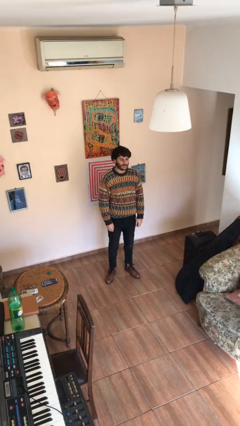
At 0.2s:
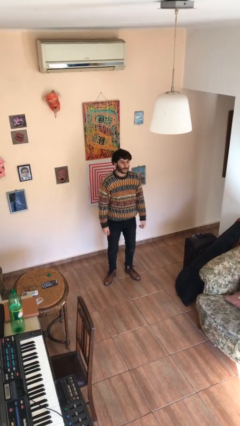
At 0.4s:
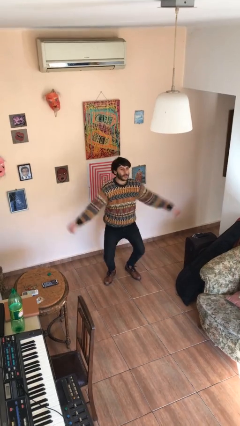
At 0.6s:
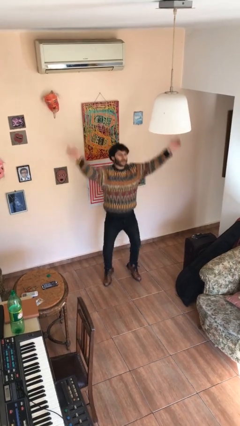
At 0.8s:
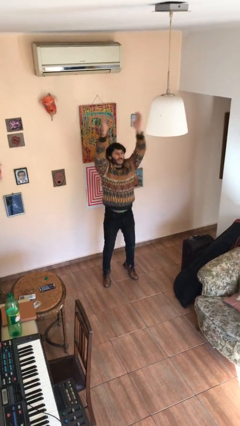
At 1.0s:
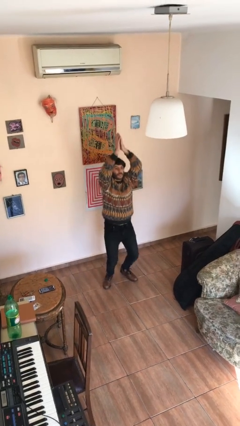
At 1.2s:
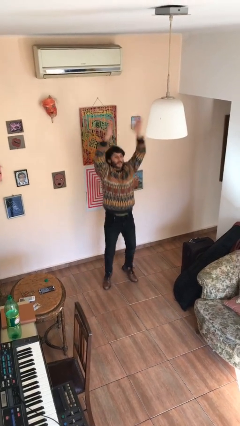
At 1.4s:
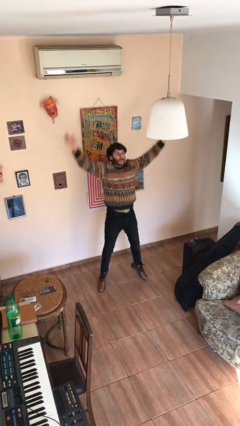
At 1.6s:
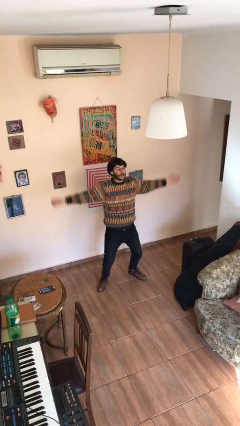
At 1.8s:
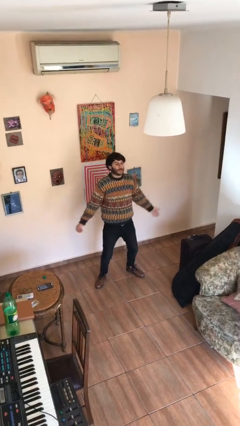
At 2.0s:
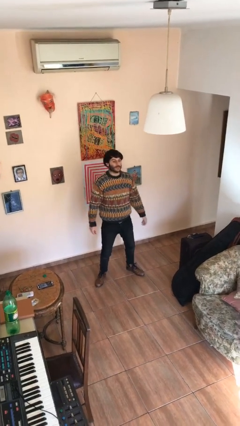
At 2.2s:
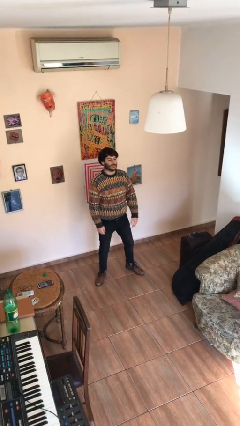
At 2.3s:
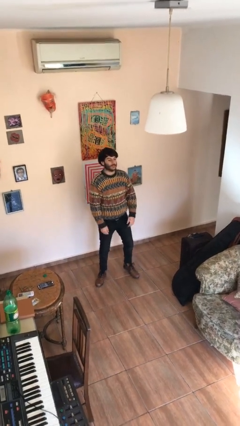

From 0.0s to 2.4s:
person exercises with jumping jacks

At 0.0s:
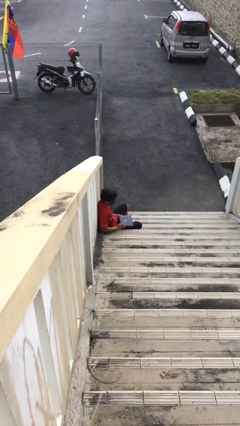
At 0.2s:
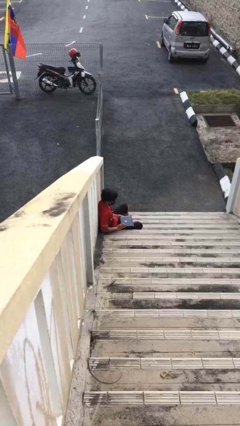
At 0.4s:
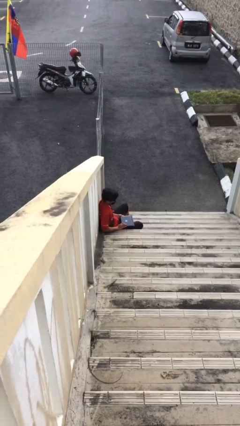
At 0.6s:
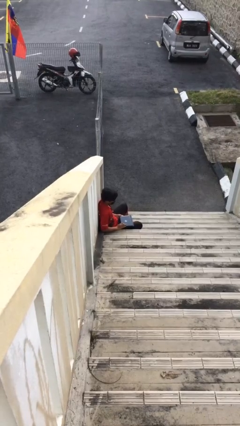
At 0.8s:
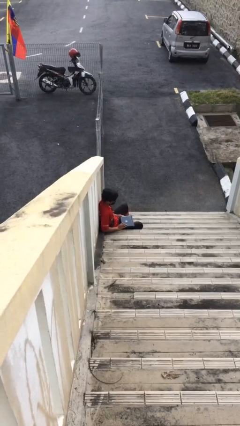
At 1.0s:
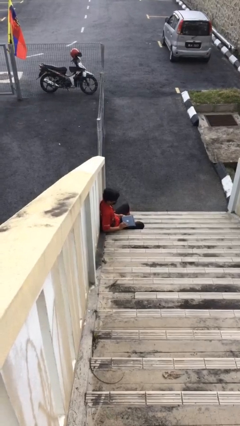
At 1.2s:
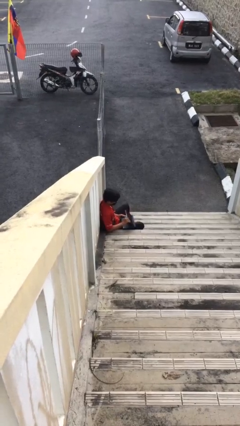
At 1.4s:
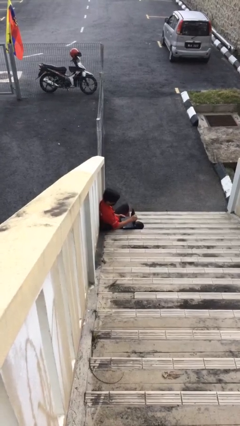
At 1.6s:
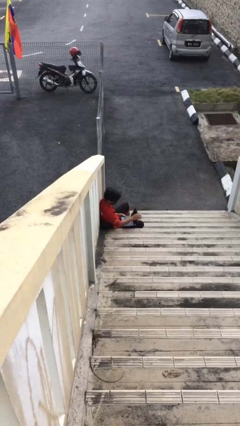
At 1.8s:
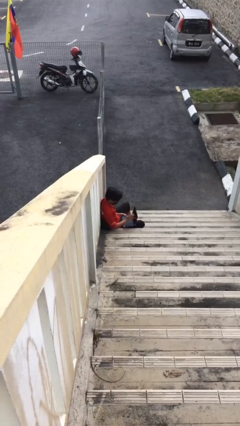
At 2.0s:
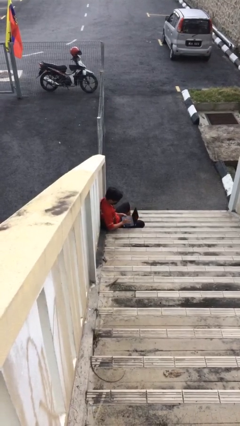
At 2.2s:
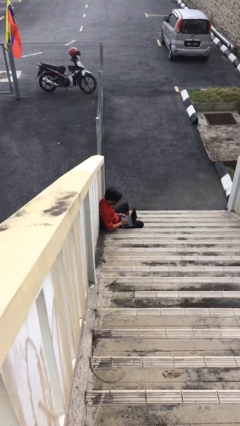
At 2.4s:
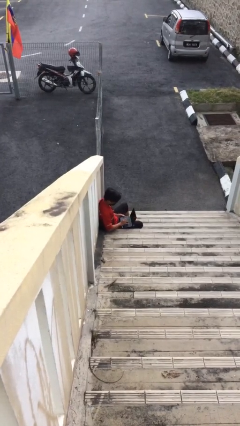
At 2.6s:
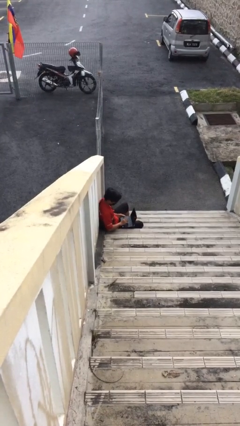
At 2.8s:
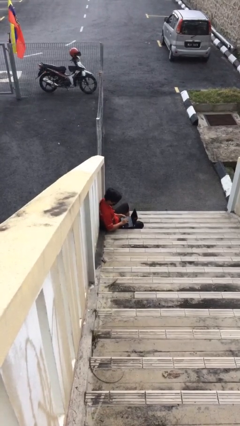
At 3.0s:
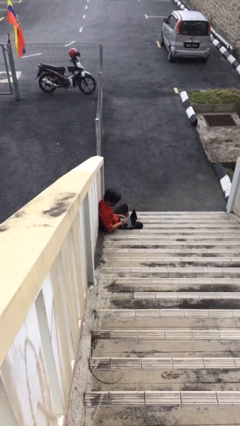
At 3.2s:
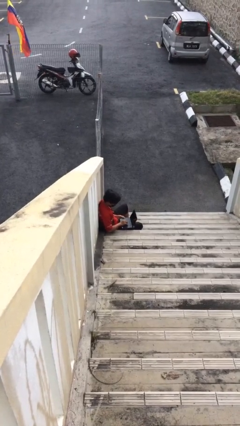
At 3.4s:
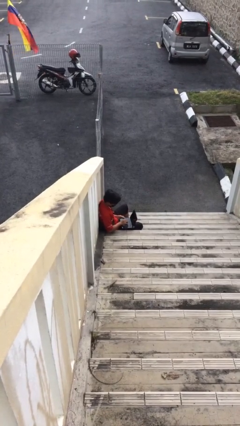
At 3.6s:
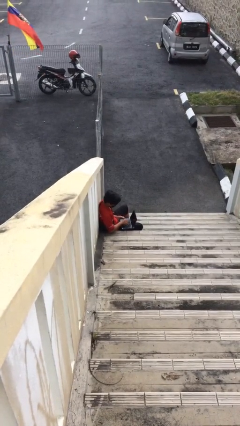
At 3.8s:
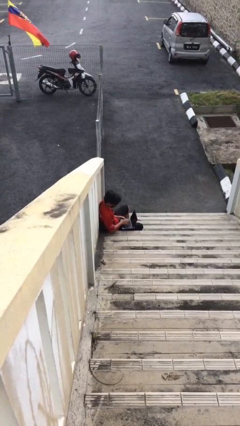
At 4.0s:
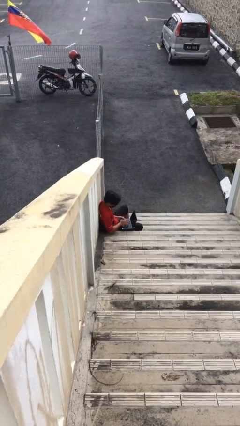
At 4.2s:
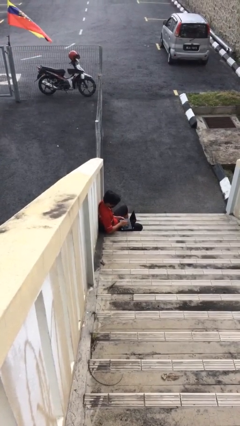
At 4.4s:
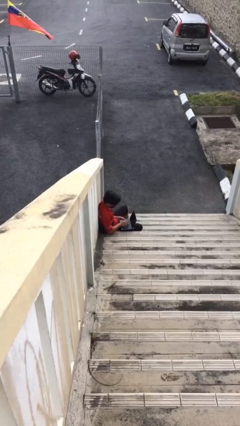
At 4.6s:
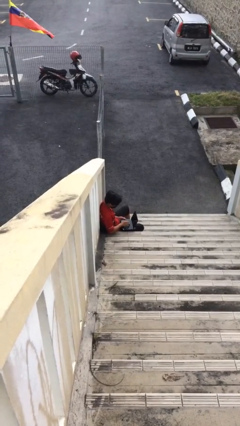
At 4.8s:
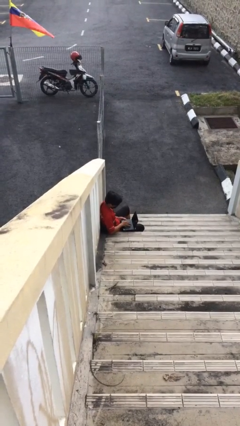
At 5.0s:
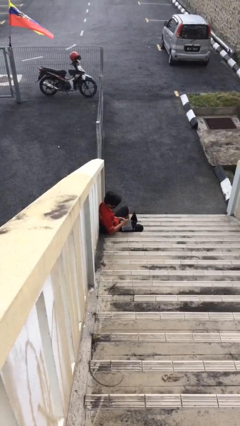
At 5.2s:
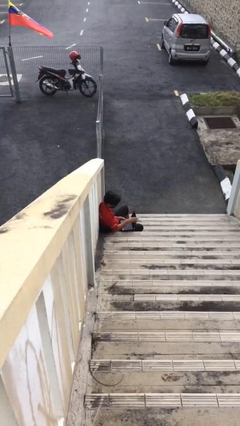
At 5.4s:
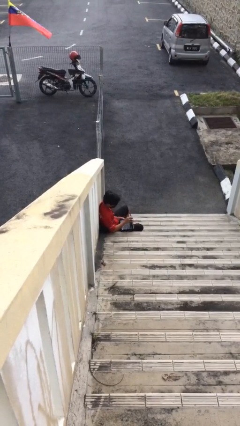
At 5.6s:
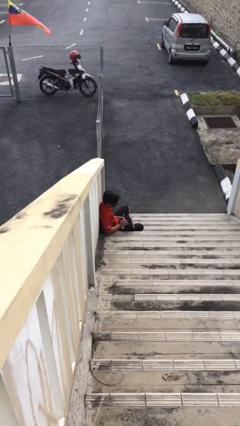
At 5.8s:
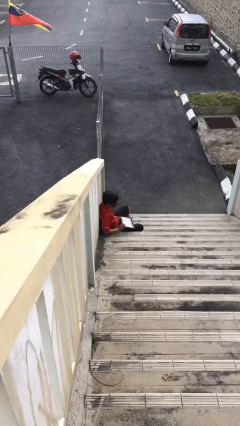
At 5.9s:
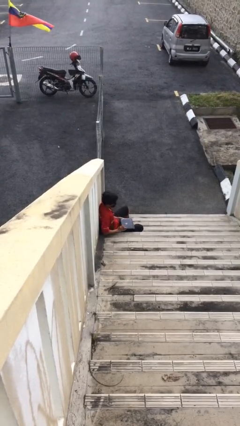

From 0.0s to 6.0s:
person interacts with laptop

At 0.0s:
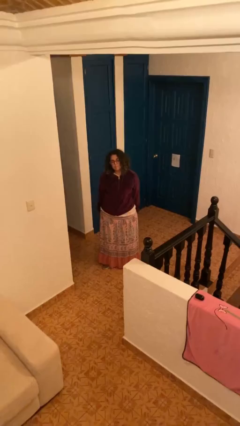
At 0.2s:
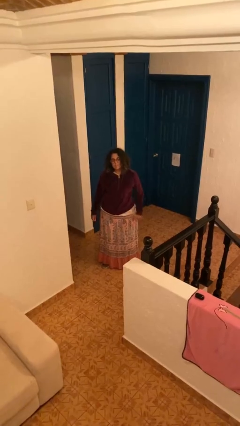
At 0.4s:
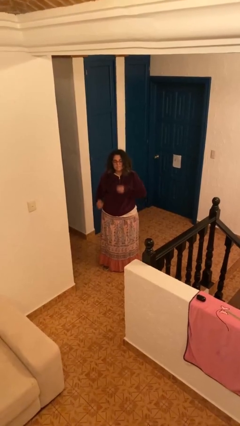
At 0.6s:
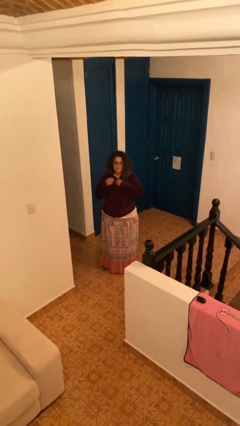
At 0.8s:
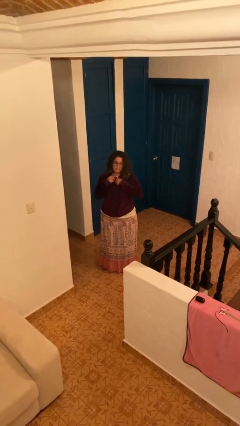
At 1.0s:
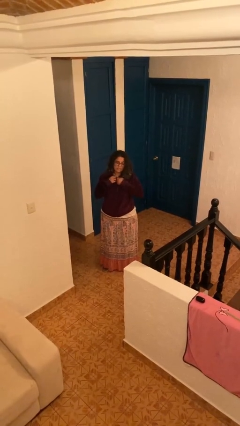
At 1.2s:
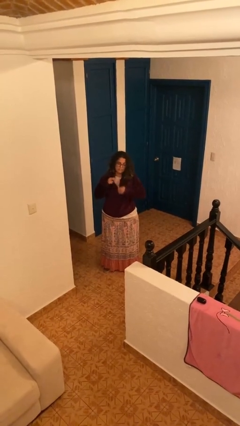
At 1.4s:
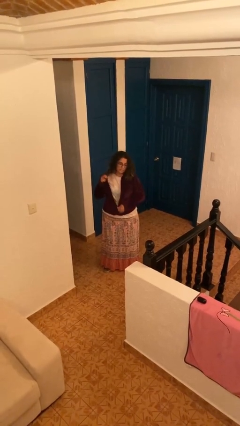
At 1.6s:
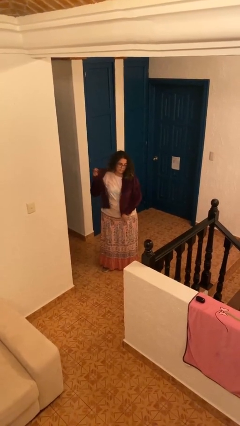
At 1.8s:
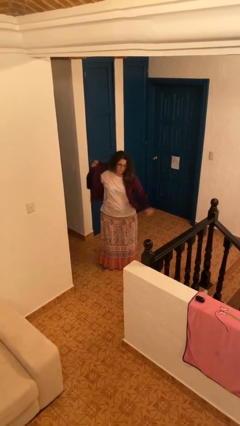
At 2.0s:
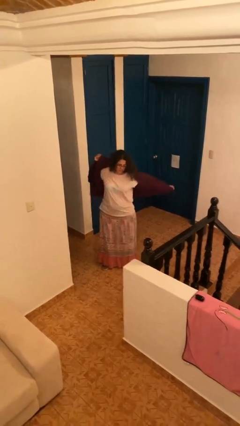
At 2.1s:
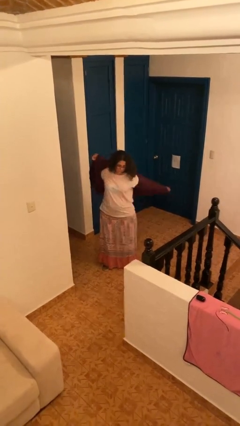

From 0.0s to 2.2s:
person unzips jacket

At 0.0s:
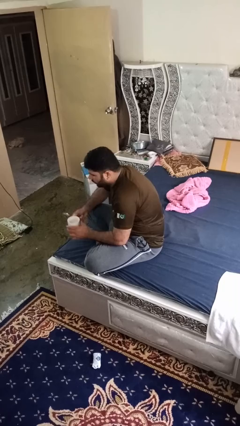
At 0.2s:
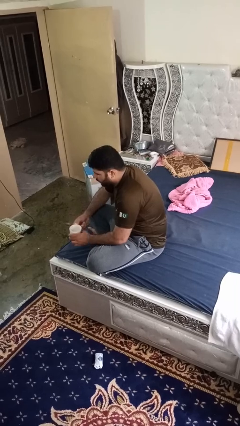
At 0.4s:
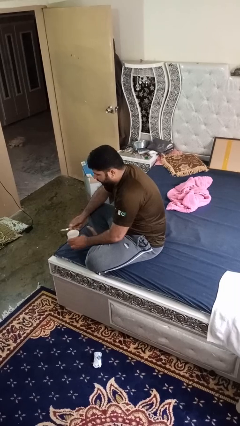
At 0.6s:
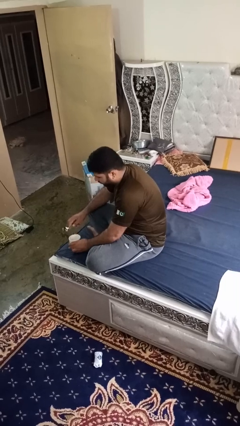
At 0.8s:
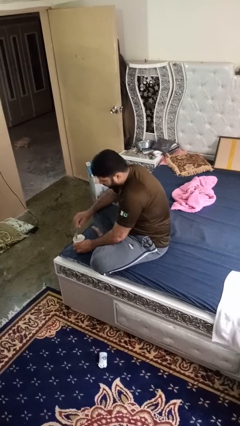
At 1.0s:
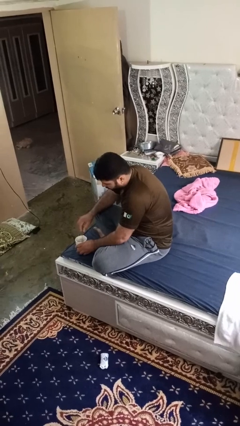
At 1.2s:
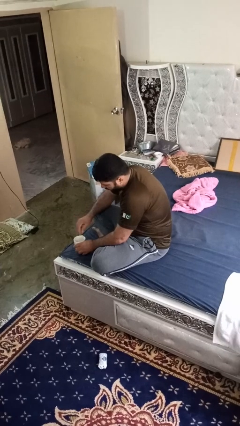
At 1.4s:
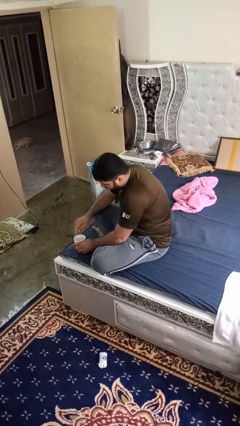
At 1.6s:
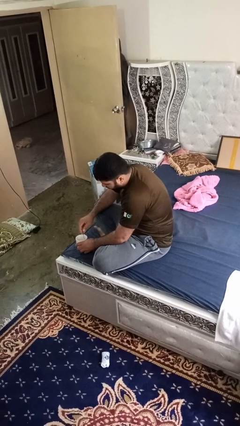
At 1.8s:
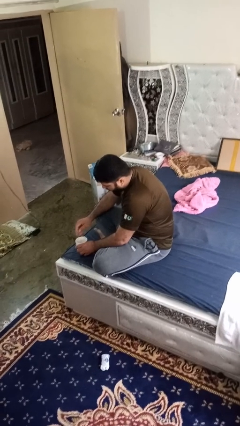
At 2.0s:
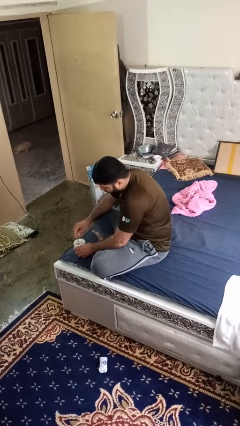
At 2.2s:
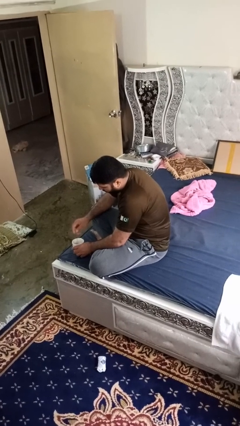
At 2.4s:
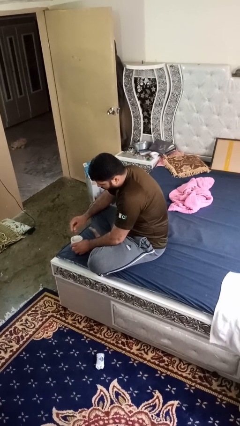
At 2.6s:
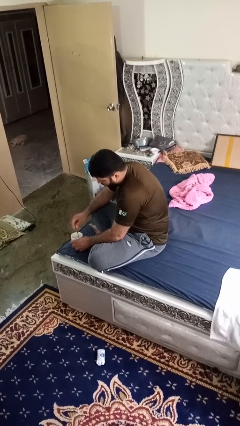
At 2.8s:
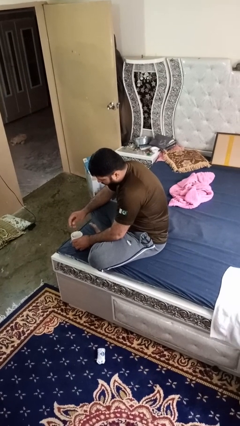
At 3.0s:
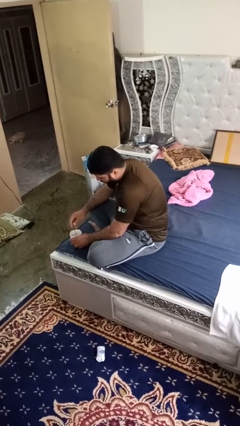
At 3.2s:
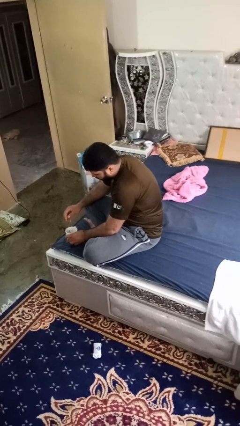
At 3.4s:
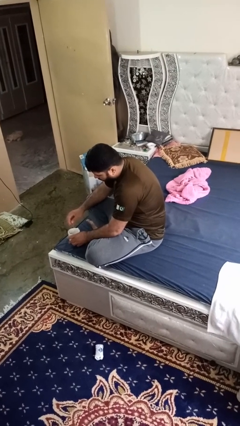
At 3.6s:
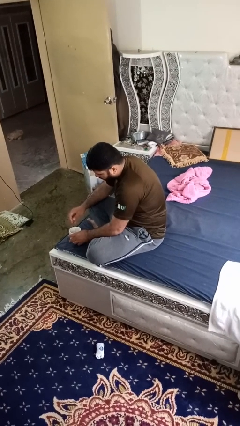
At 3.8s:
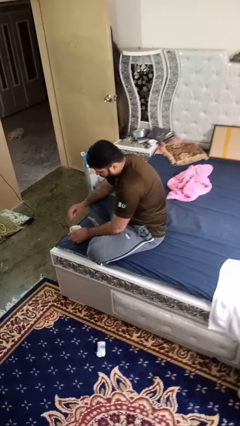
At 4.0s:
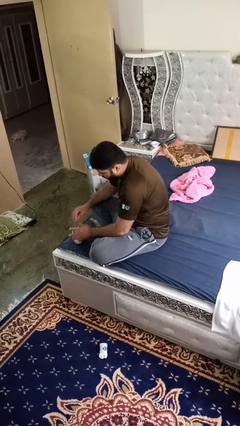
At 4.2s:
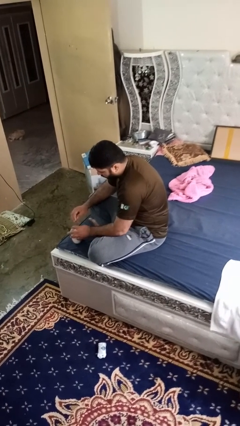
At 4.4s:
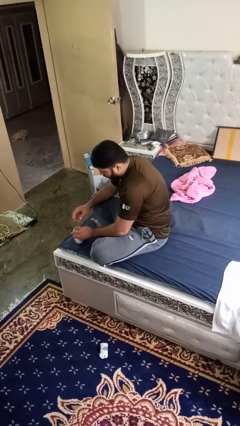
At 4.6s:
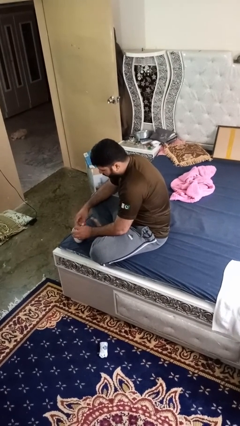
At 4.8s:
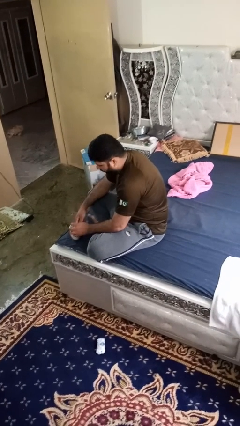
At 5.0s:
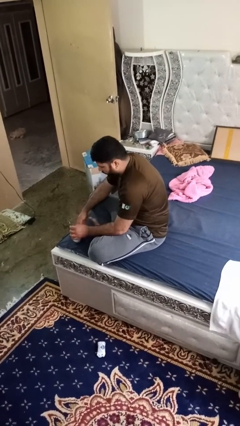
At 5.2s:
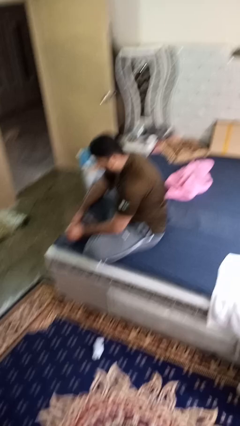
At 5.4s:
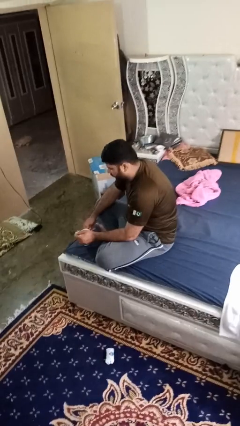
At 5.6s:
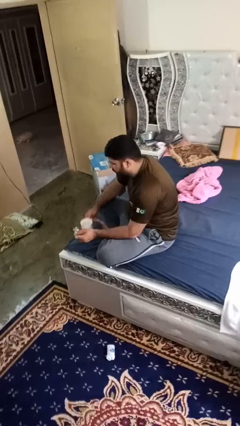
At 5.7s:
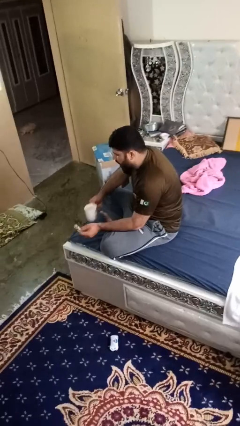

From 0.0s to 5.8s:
person stirs mug

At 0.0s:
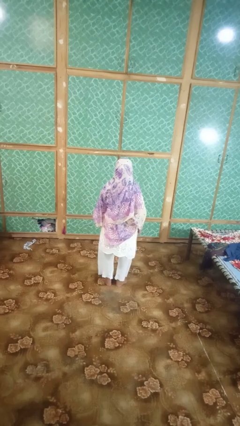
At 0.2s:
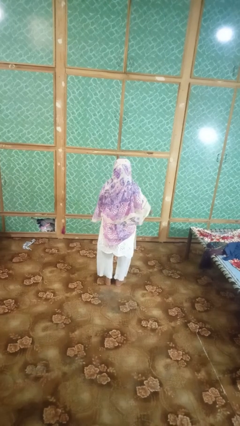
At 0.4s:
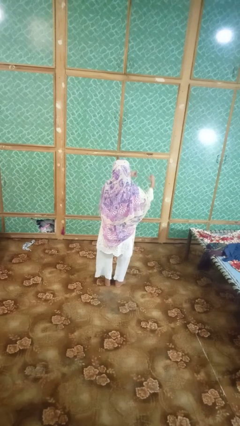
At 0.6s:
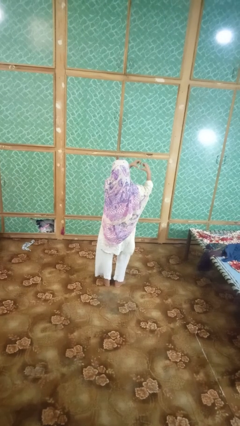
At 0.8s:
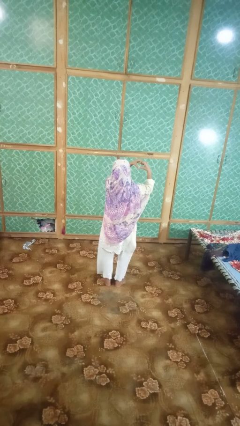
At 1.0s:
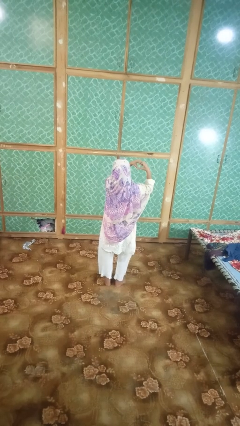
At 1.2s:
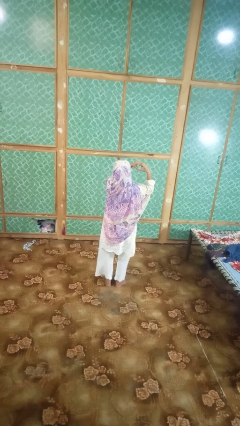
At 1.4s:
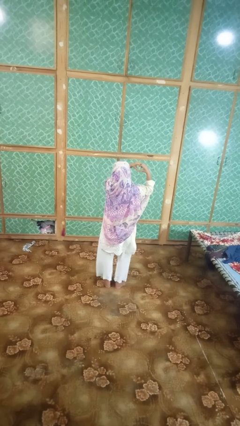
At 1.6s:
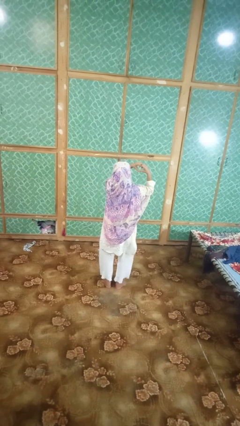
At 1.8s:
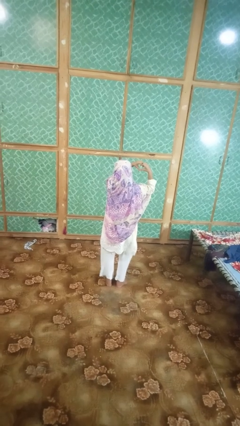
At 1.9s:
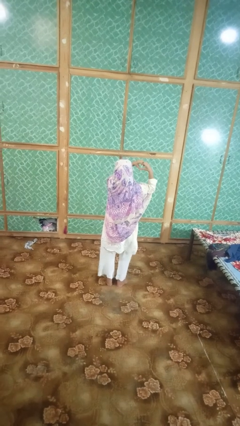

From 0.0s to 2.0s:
person gestures heart
